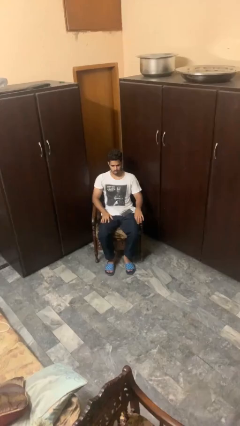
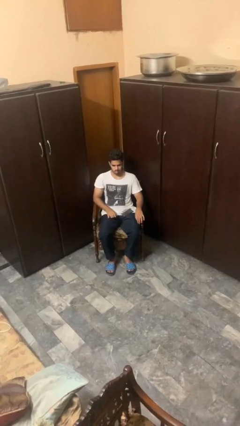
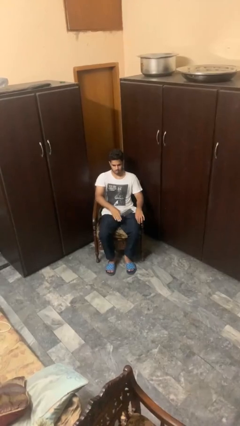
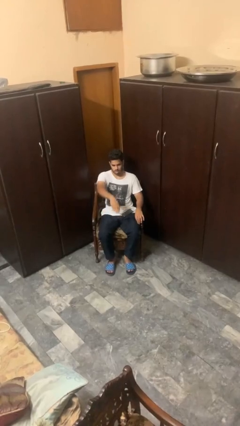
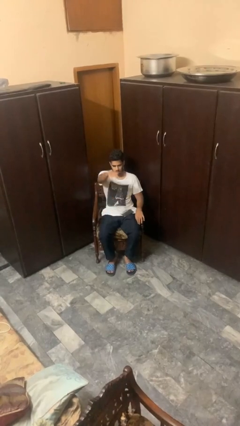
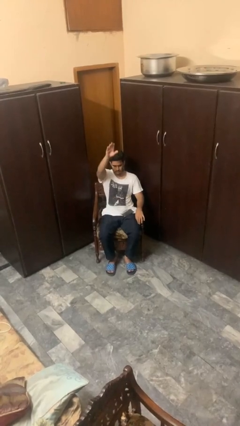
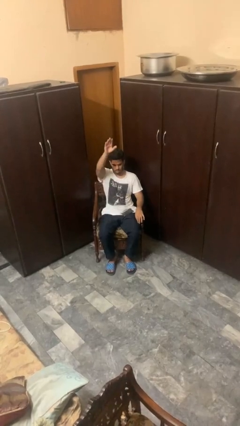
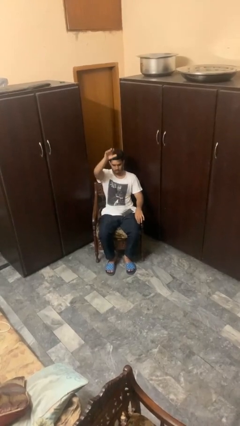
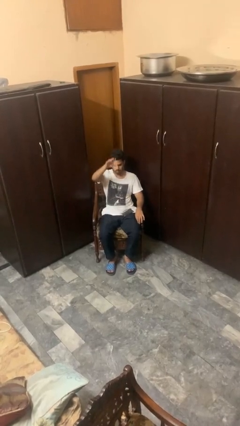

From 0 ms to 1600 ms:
person gestures swipe up

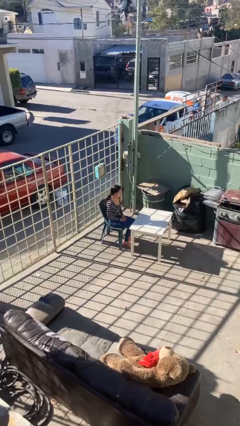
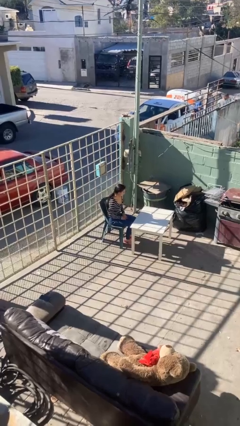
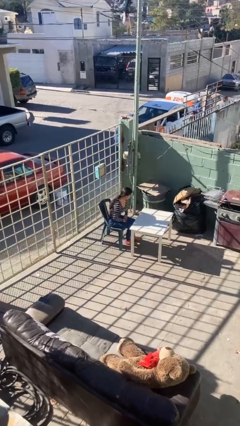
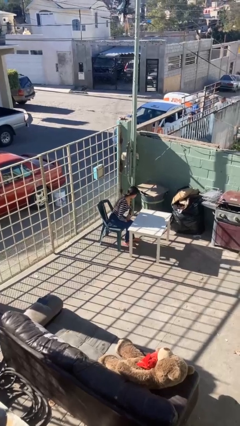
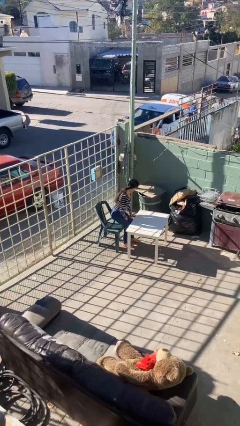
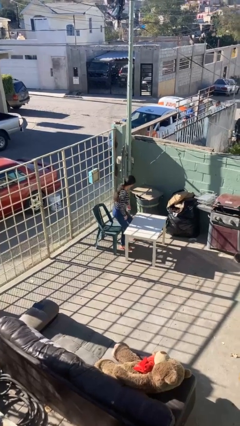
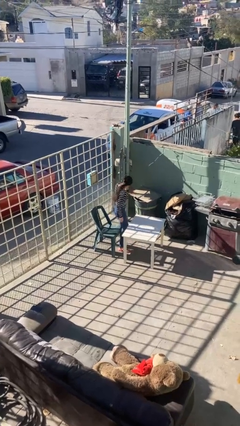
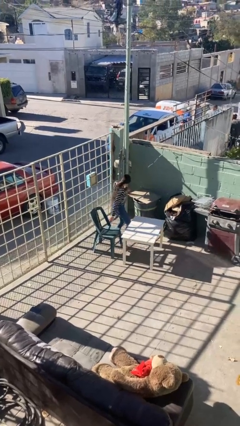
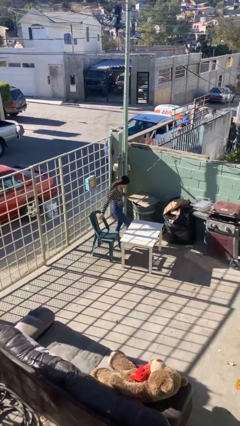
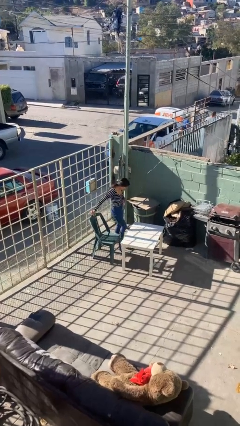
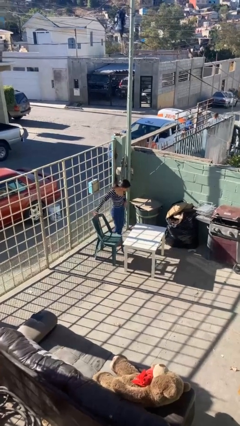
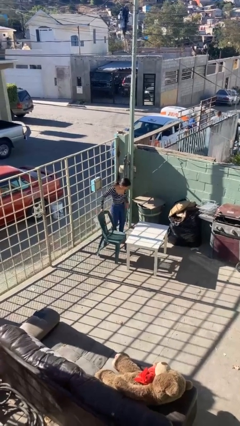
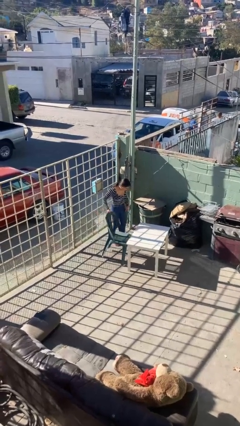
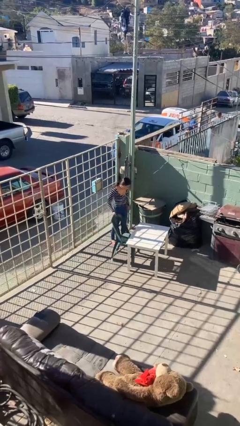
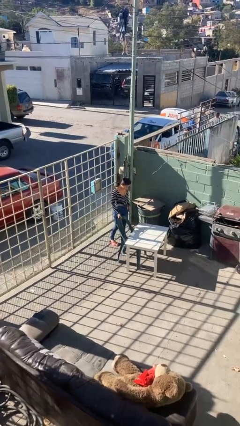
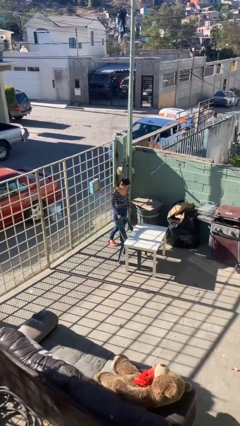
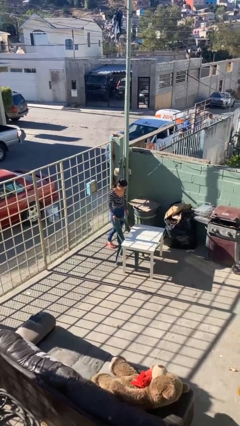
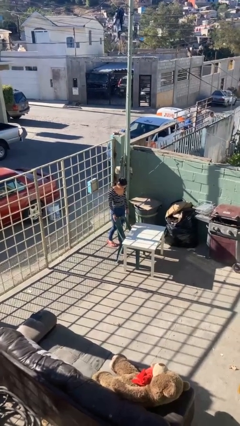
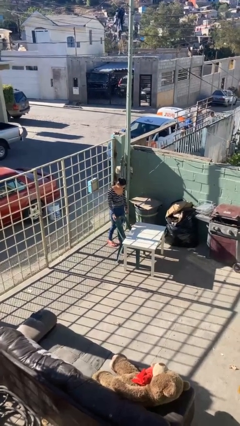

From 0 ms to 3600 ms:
person stands up

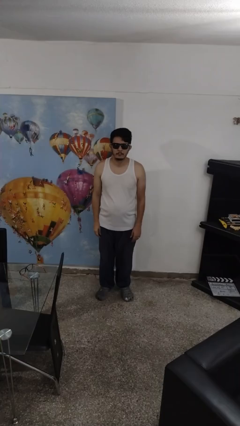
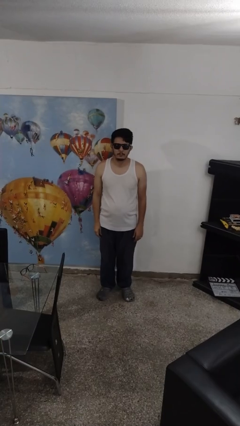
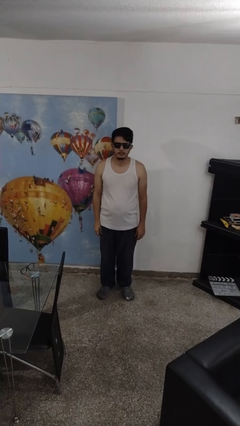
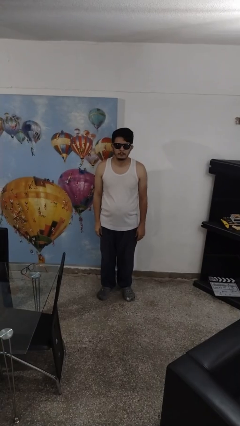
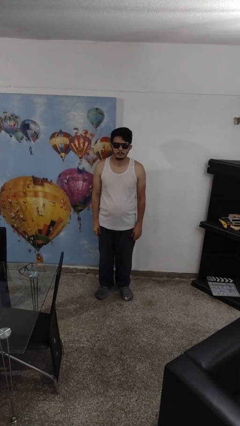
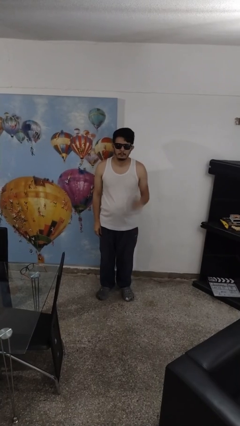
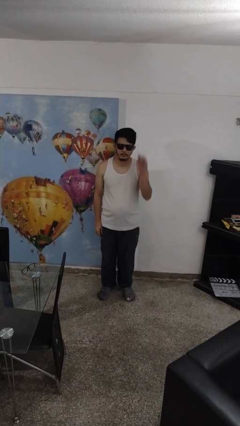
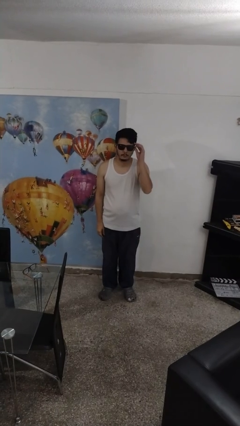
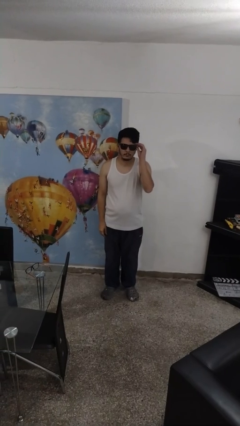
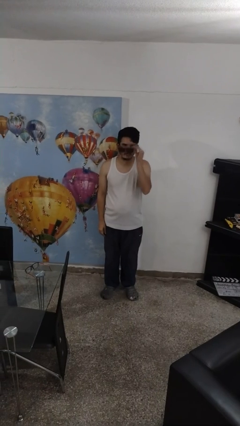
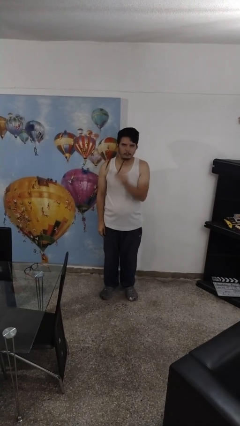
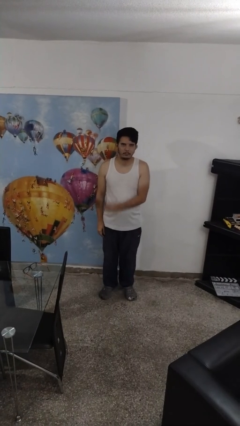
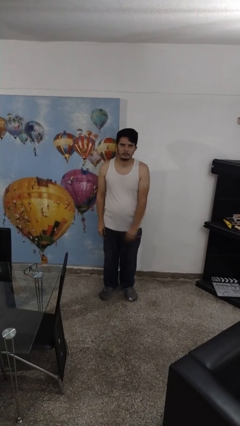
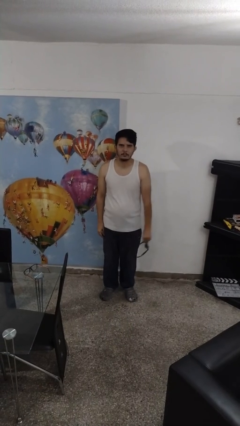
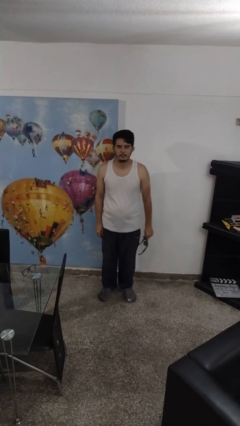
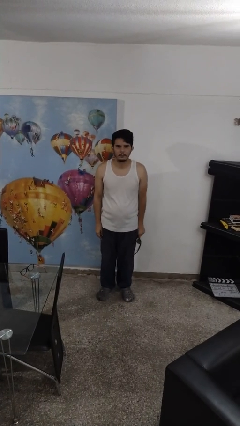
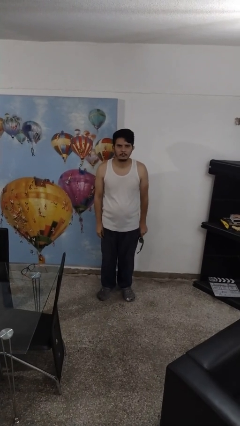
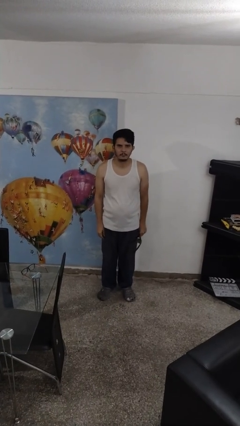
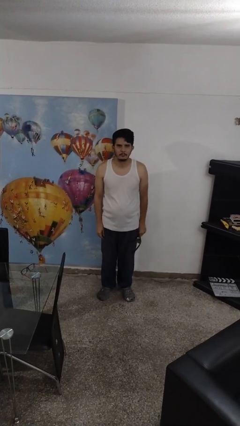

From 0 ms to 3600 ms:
person takes off sunglasses

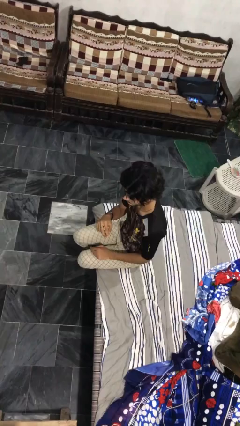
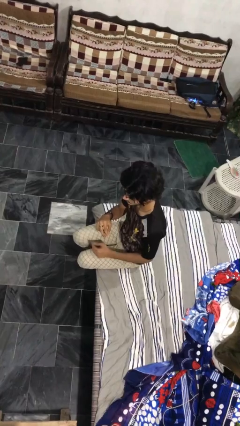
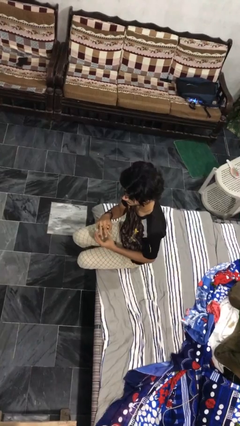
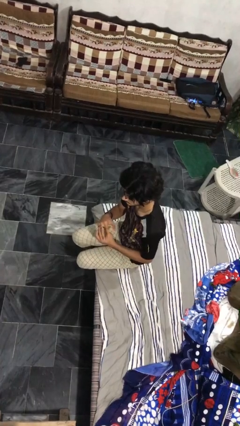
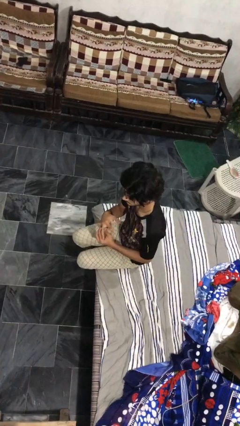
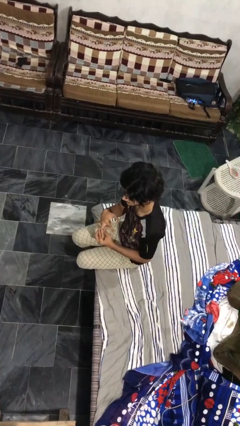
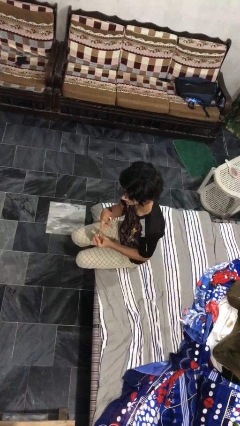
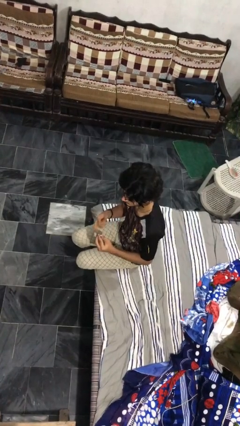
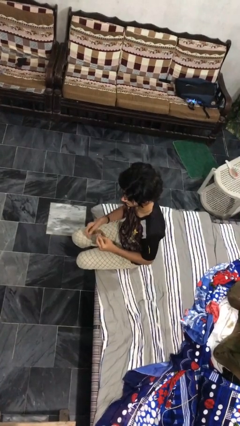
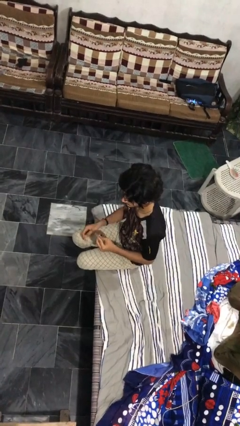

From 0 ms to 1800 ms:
person takes off ring

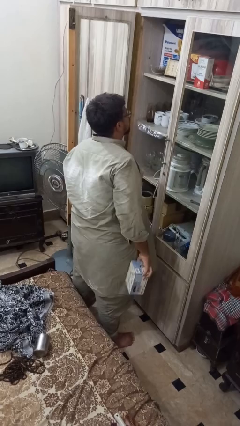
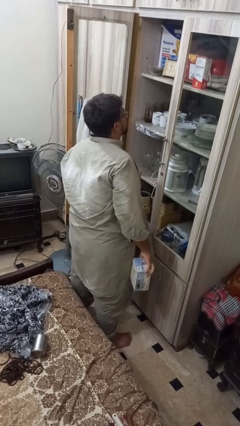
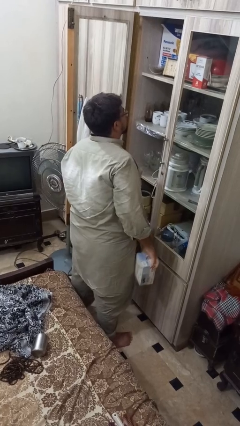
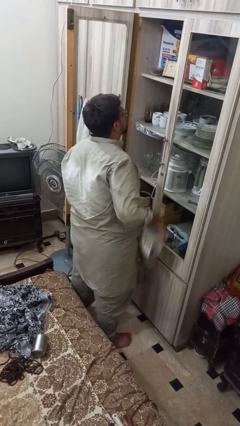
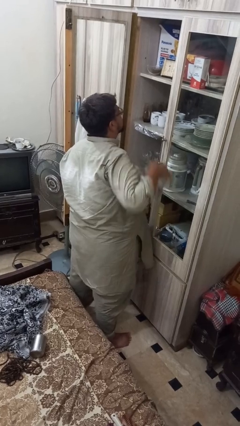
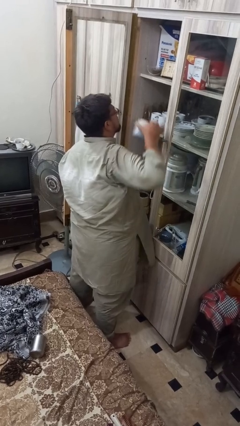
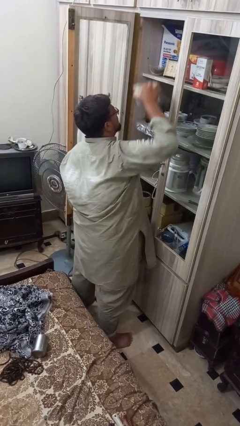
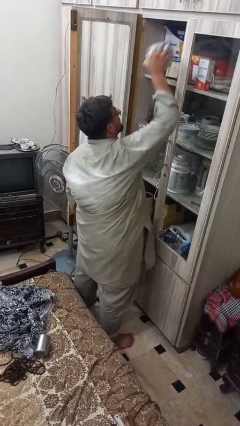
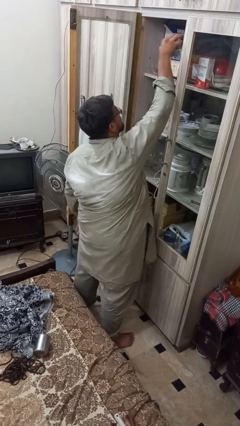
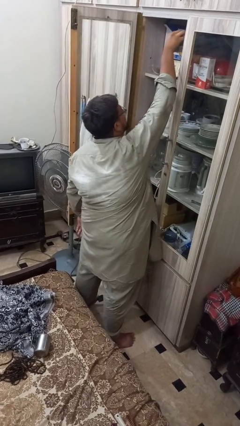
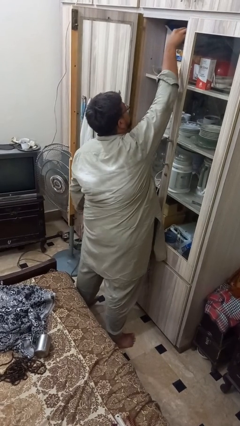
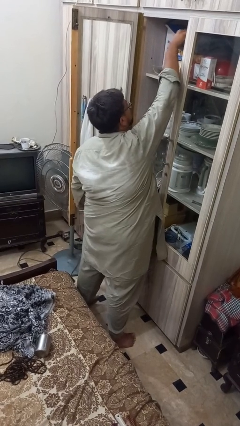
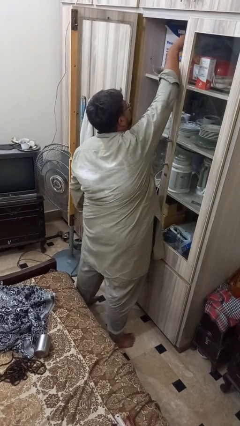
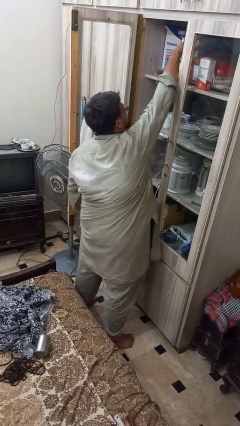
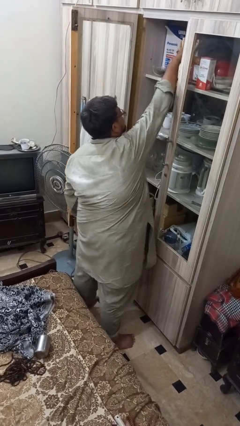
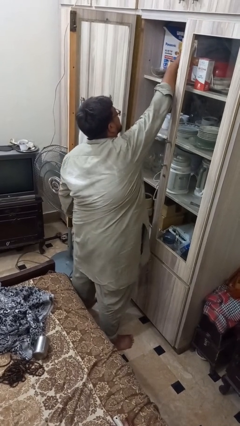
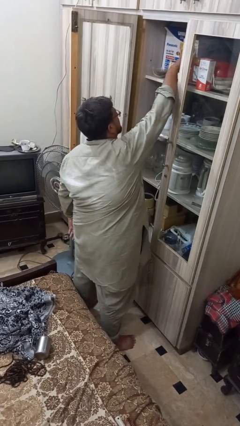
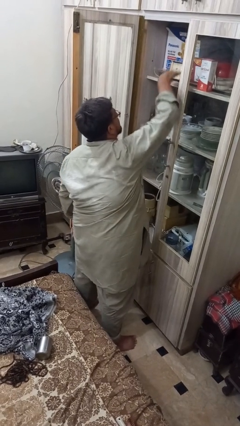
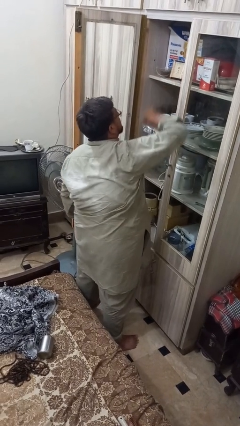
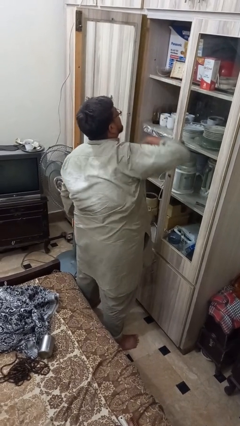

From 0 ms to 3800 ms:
person puts down object on shelf

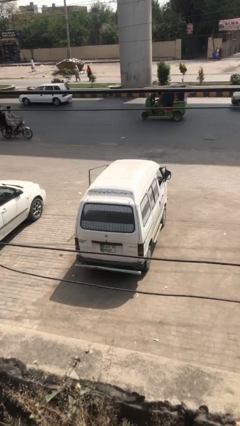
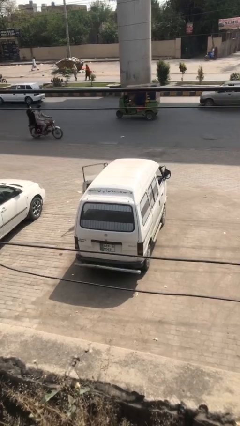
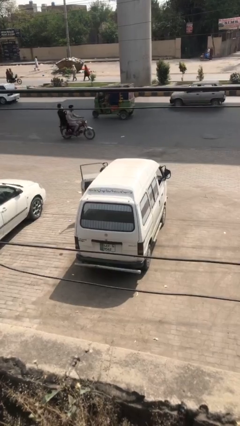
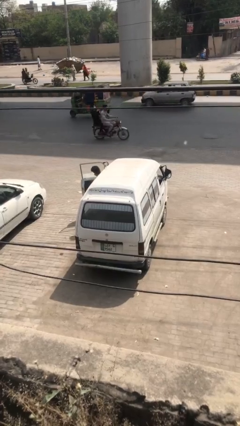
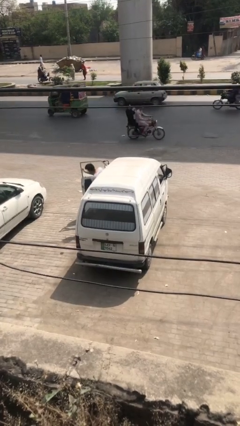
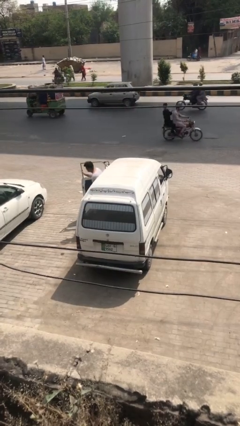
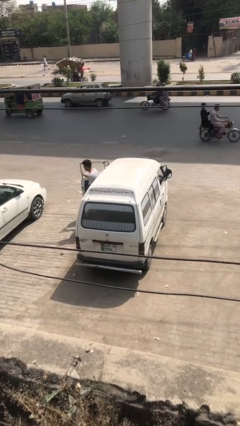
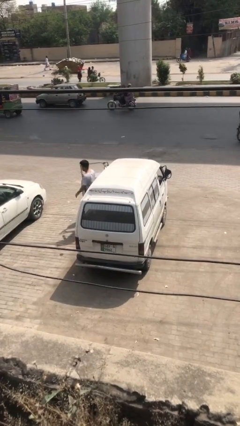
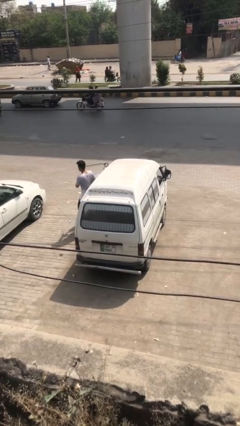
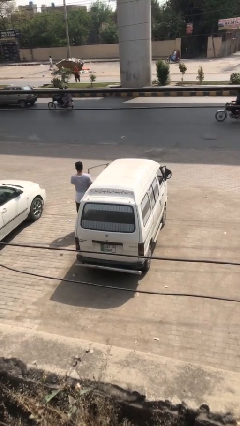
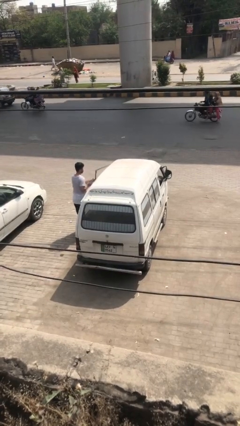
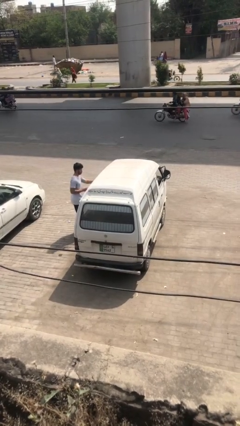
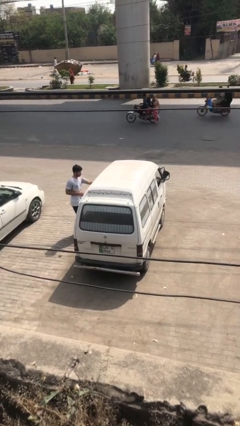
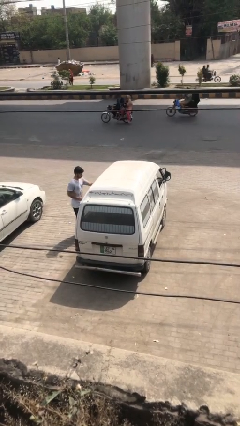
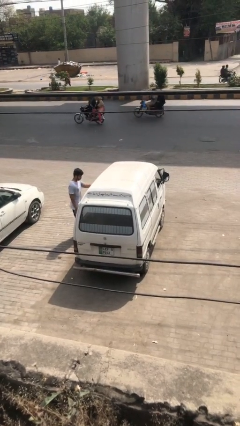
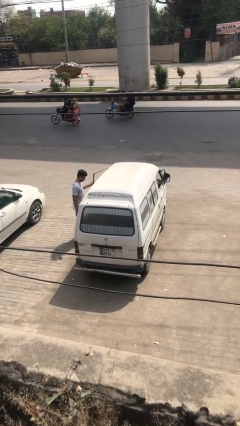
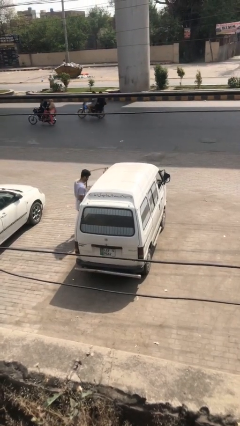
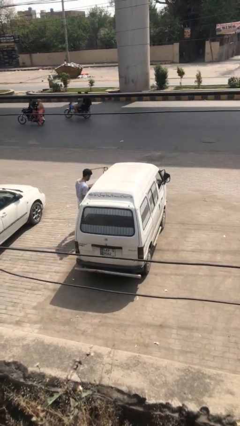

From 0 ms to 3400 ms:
car drops off person
